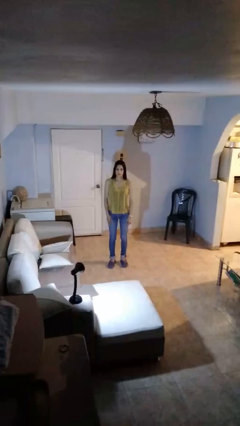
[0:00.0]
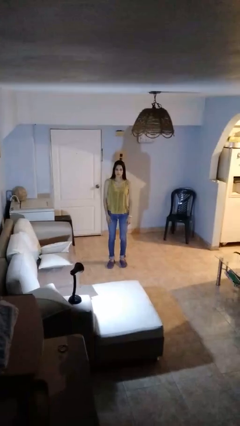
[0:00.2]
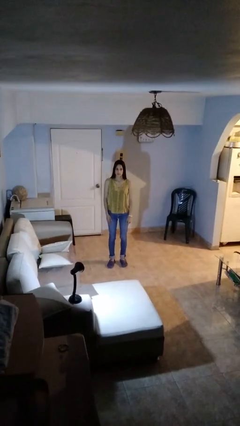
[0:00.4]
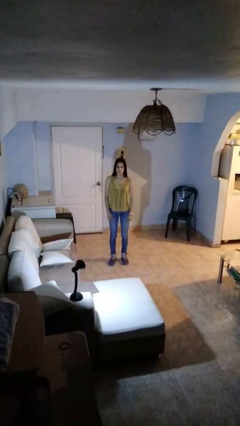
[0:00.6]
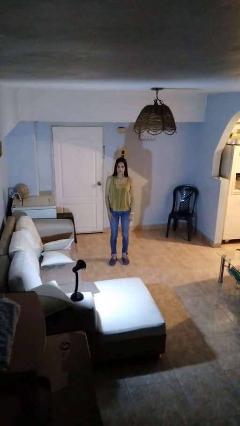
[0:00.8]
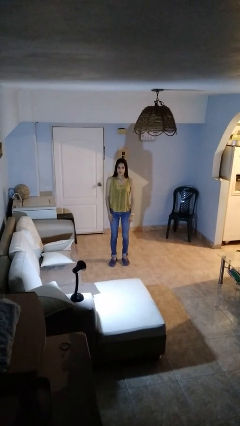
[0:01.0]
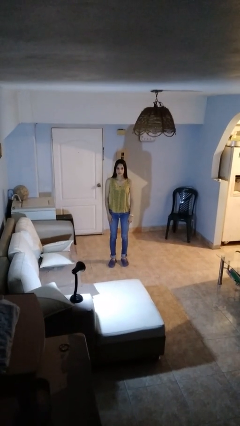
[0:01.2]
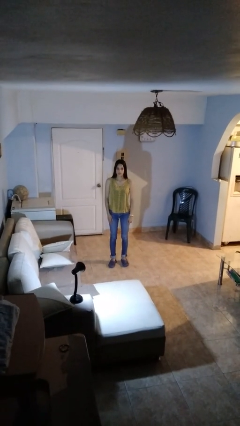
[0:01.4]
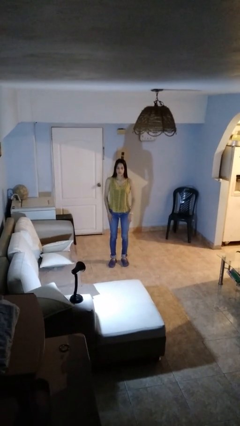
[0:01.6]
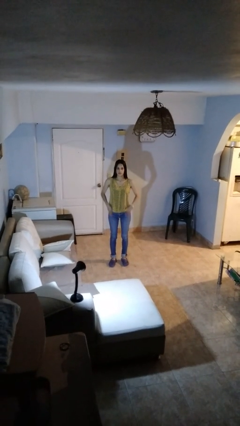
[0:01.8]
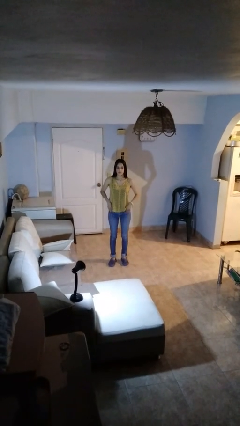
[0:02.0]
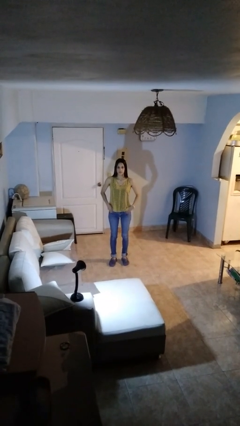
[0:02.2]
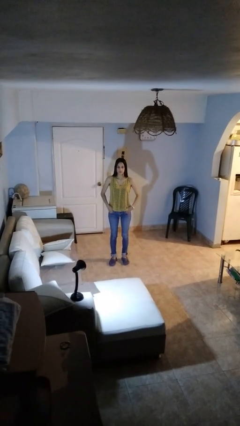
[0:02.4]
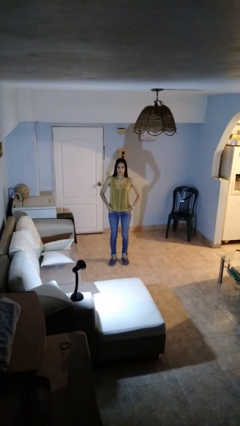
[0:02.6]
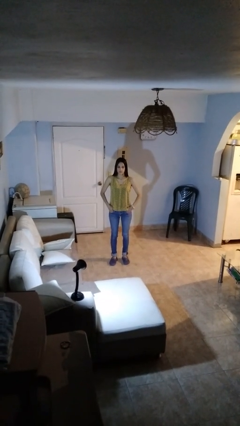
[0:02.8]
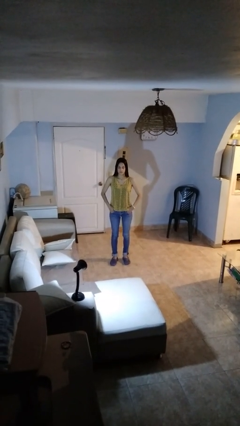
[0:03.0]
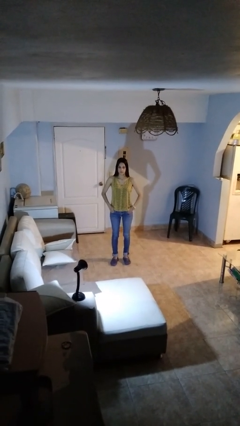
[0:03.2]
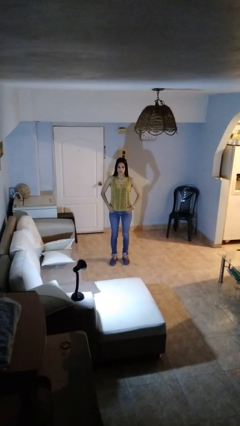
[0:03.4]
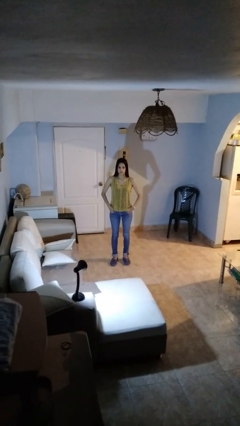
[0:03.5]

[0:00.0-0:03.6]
person puts hands in back pockets

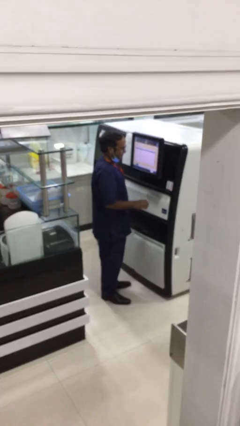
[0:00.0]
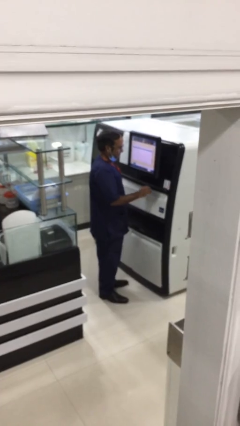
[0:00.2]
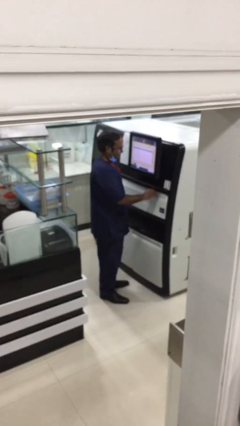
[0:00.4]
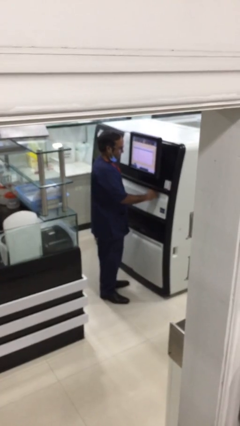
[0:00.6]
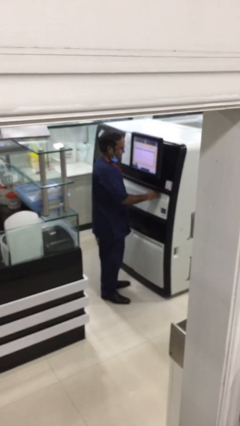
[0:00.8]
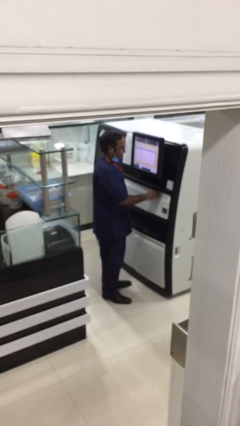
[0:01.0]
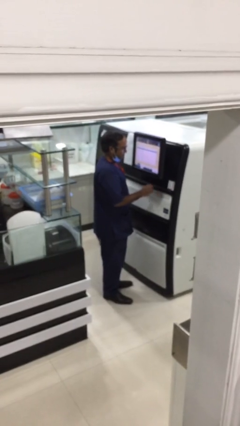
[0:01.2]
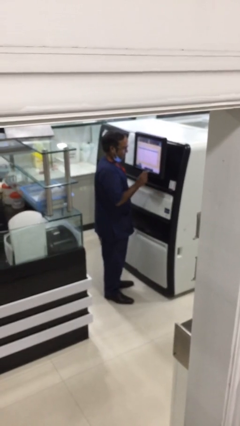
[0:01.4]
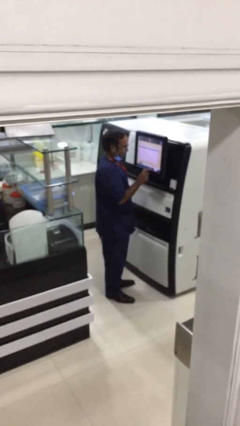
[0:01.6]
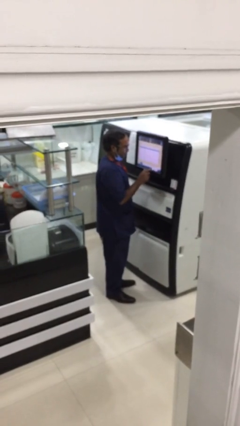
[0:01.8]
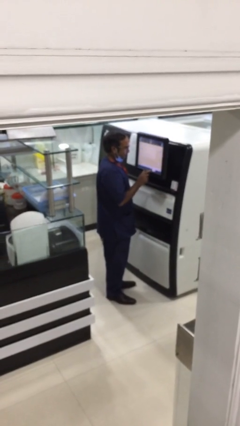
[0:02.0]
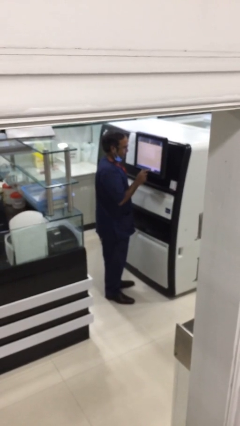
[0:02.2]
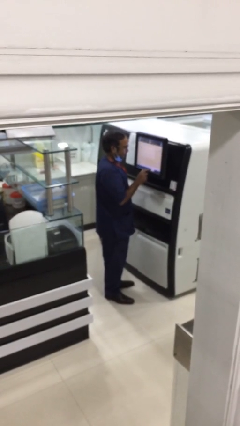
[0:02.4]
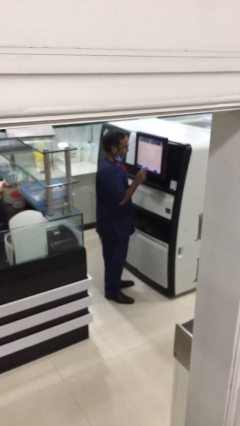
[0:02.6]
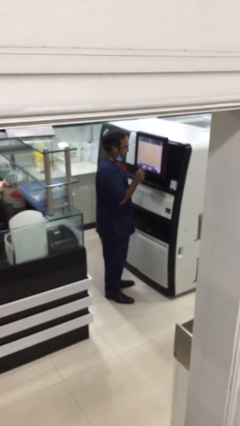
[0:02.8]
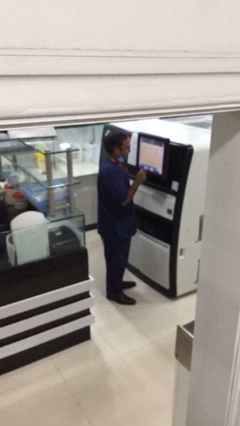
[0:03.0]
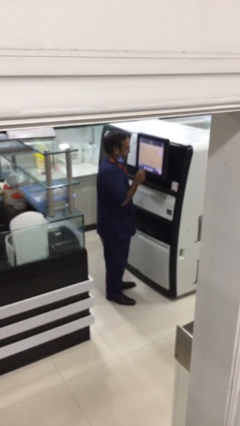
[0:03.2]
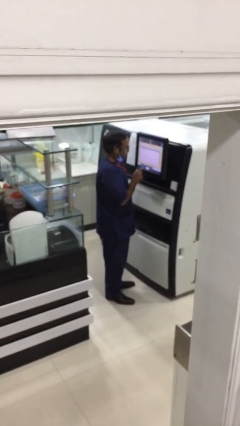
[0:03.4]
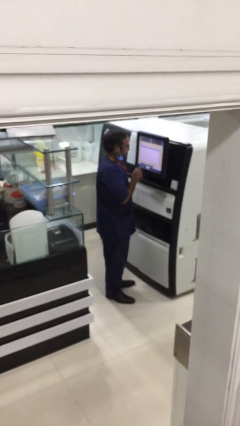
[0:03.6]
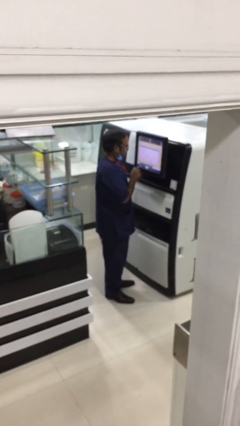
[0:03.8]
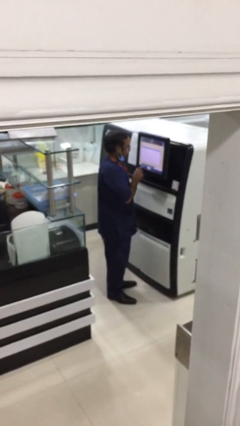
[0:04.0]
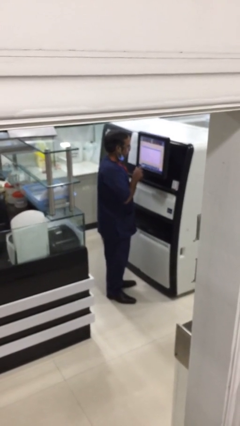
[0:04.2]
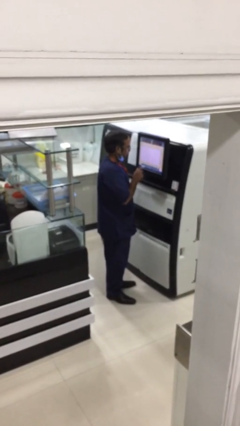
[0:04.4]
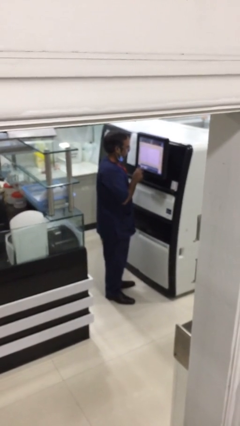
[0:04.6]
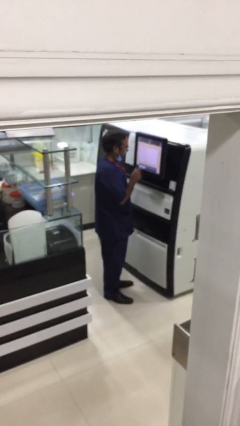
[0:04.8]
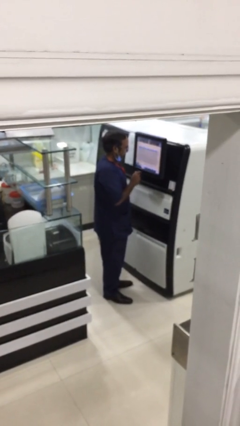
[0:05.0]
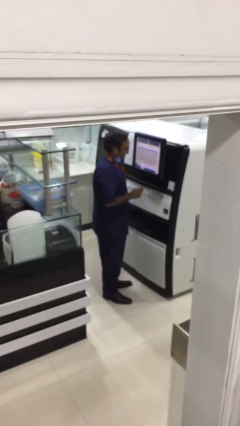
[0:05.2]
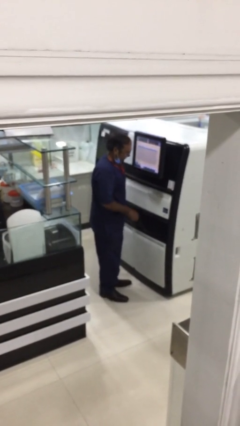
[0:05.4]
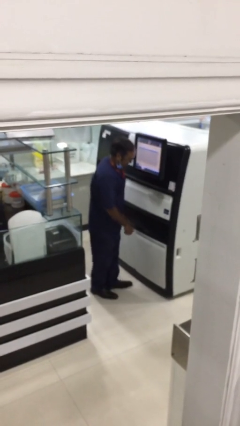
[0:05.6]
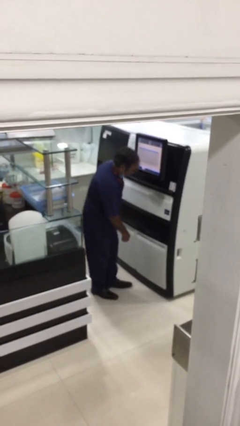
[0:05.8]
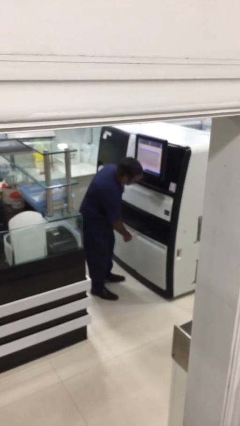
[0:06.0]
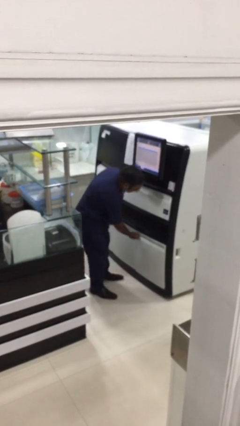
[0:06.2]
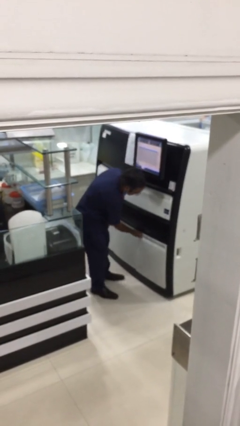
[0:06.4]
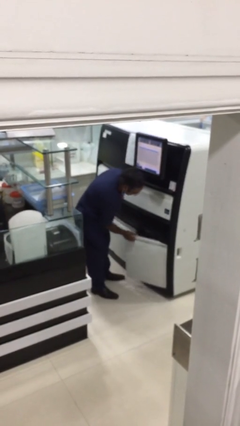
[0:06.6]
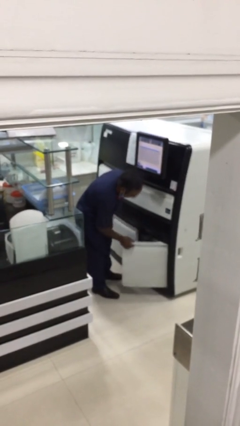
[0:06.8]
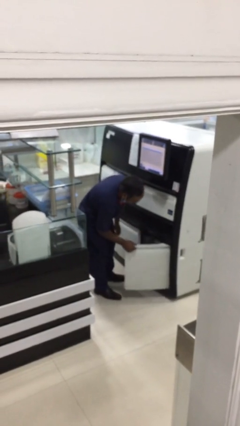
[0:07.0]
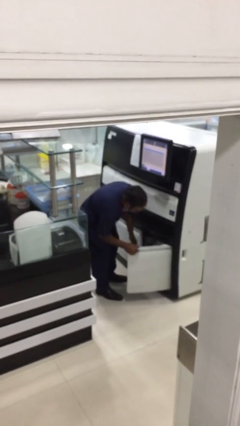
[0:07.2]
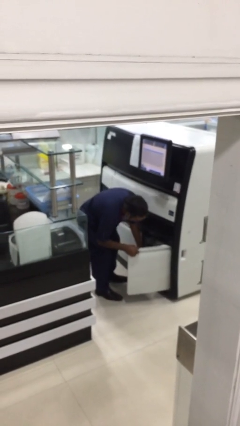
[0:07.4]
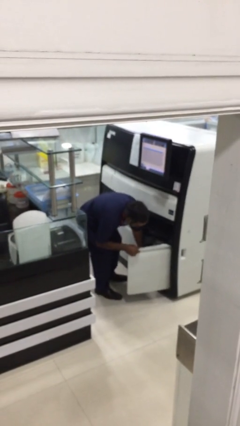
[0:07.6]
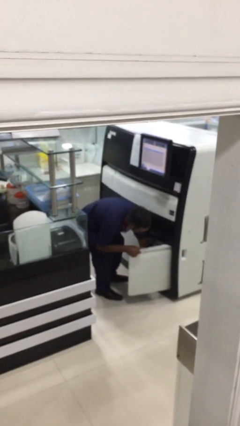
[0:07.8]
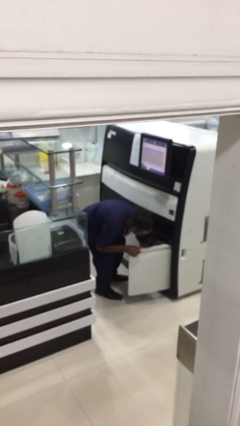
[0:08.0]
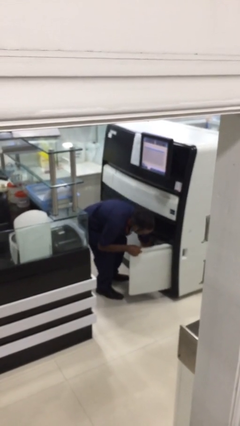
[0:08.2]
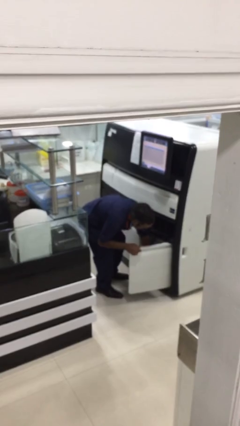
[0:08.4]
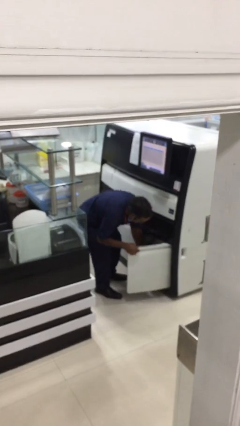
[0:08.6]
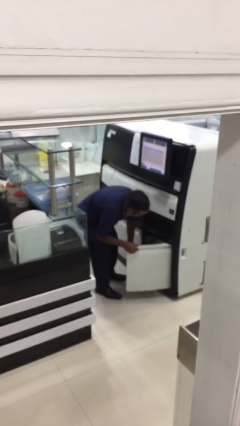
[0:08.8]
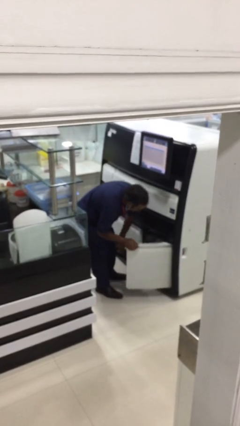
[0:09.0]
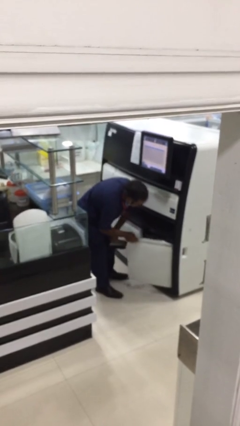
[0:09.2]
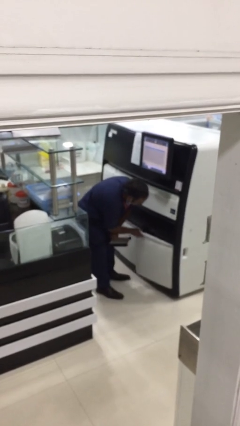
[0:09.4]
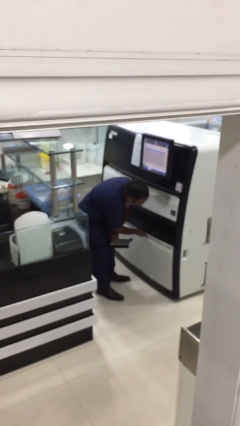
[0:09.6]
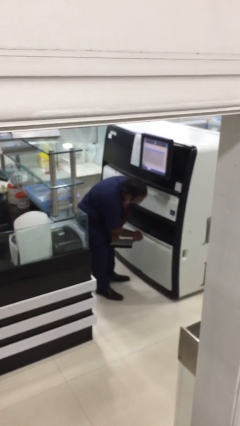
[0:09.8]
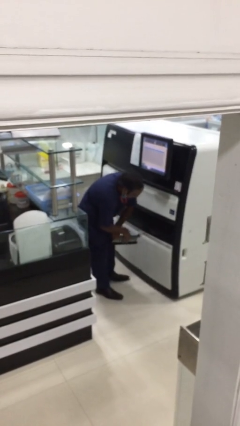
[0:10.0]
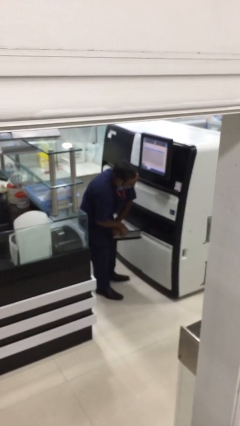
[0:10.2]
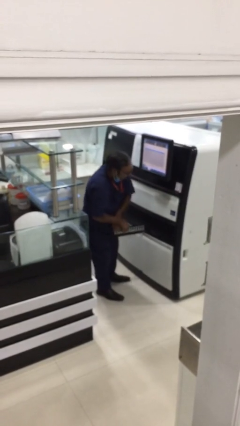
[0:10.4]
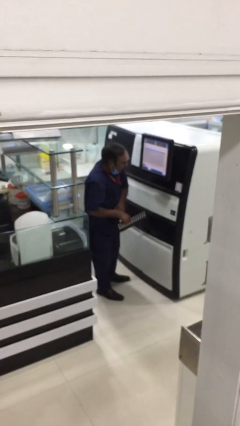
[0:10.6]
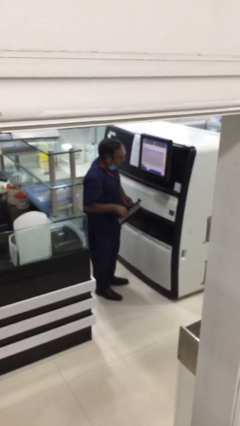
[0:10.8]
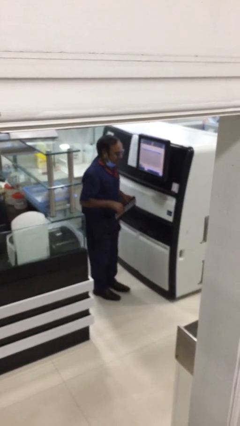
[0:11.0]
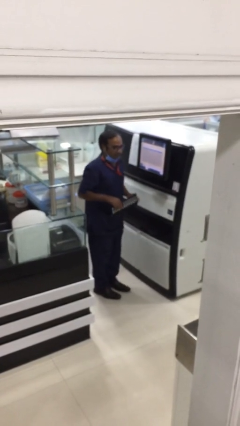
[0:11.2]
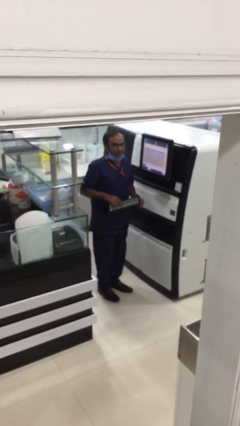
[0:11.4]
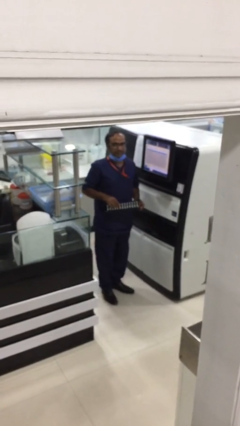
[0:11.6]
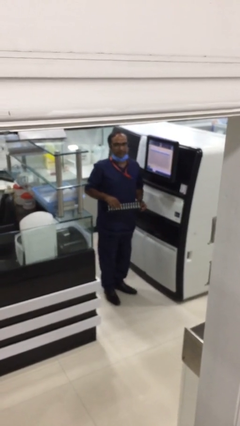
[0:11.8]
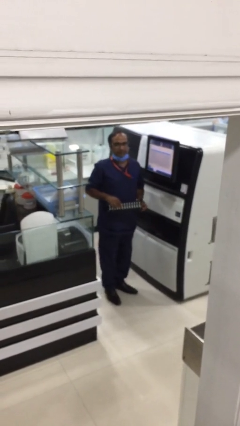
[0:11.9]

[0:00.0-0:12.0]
person purchases from machine

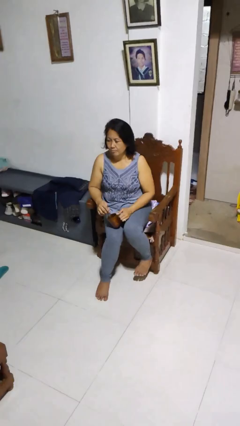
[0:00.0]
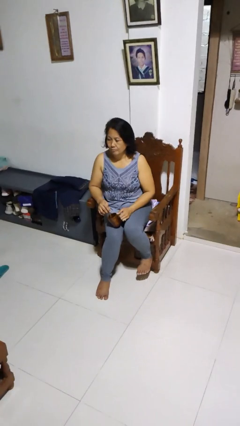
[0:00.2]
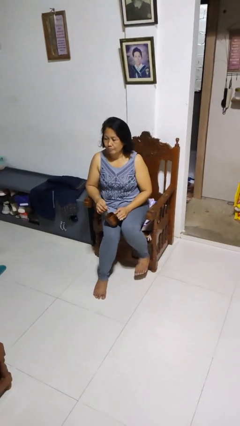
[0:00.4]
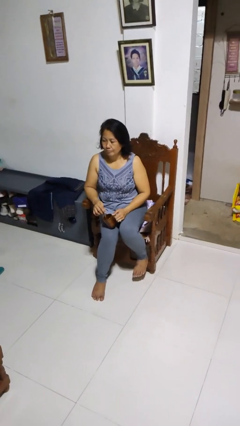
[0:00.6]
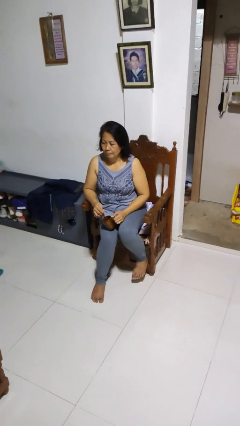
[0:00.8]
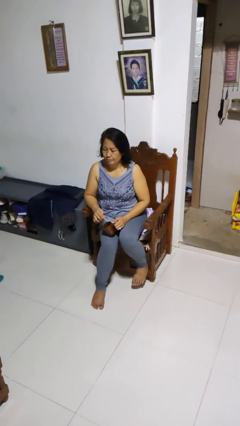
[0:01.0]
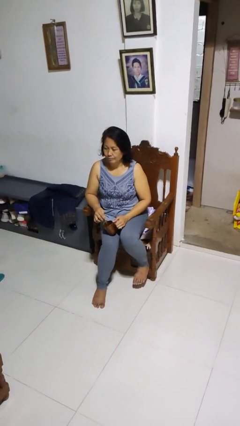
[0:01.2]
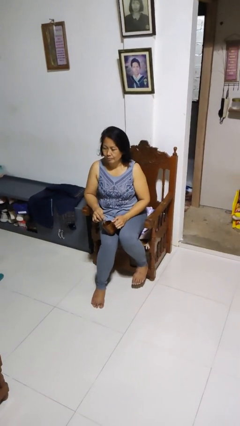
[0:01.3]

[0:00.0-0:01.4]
person stirs mug

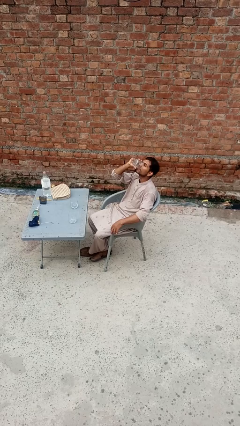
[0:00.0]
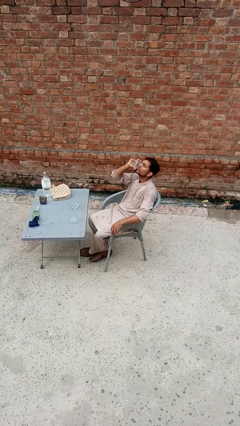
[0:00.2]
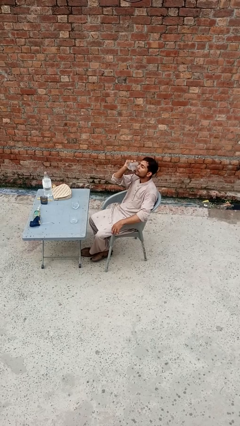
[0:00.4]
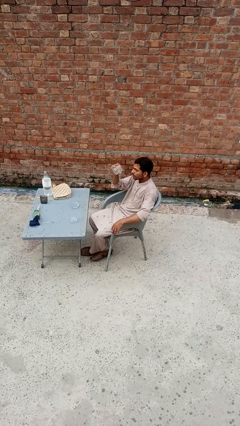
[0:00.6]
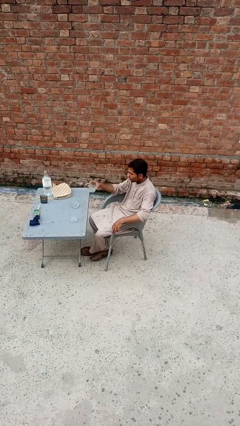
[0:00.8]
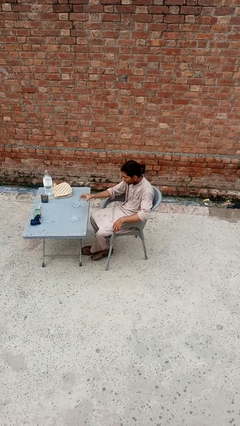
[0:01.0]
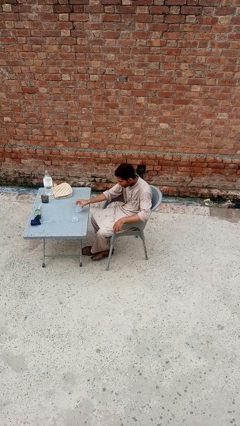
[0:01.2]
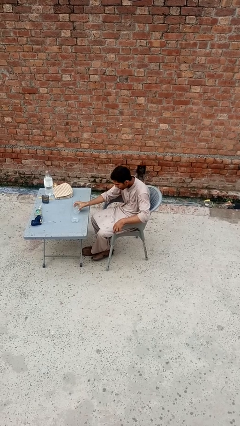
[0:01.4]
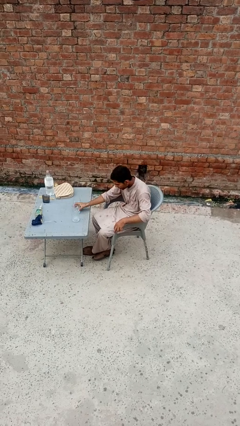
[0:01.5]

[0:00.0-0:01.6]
person puts down object on table
